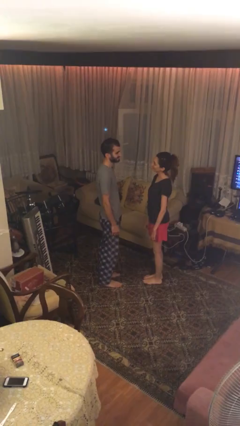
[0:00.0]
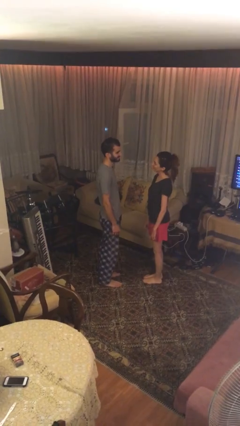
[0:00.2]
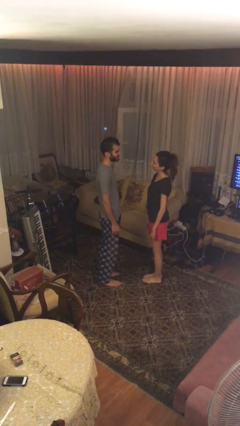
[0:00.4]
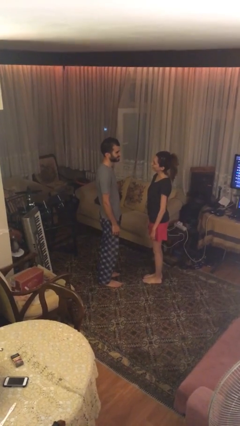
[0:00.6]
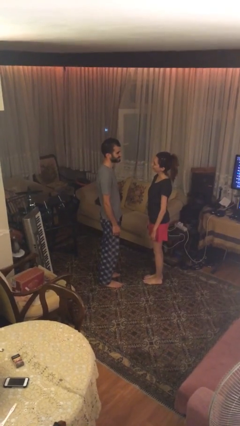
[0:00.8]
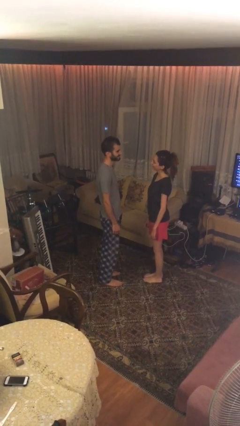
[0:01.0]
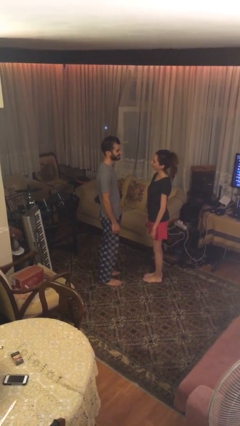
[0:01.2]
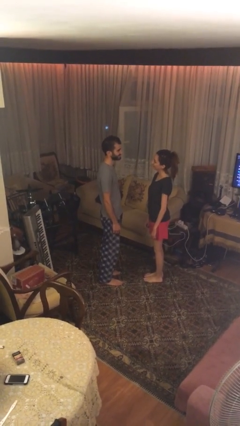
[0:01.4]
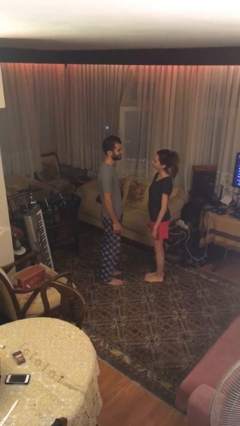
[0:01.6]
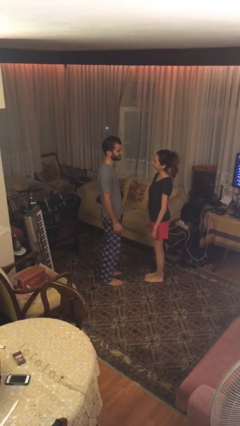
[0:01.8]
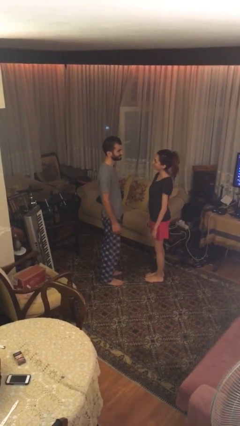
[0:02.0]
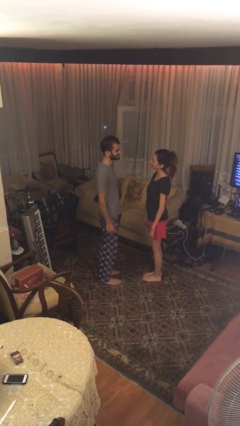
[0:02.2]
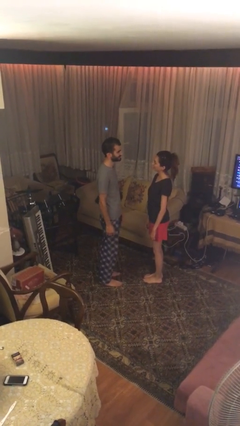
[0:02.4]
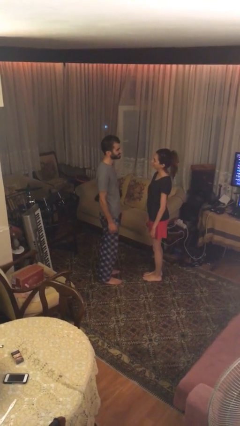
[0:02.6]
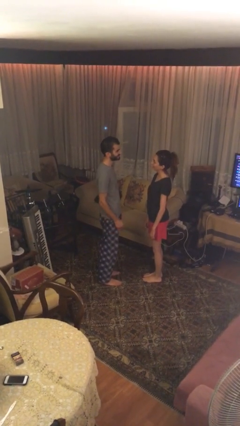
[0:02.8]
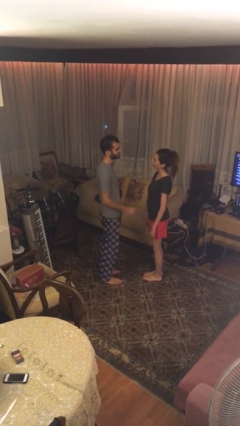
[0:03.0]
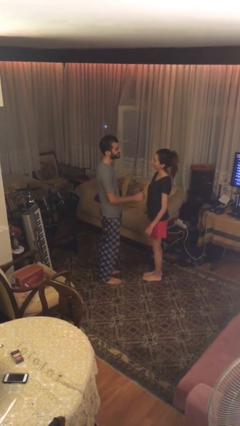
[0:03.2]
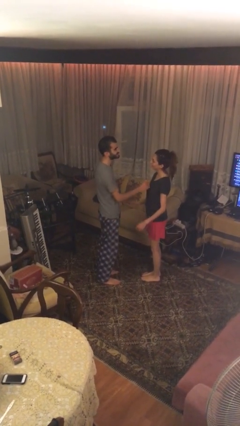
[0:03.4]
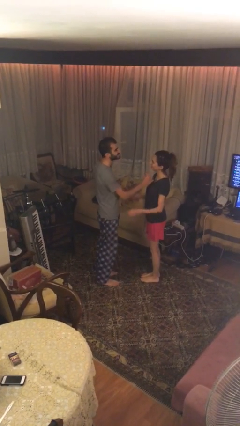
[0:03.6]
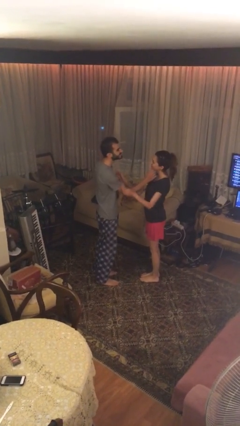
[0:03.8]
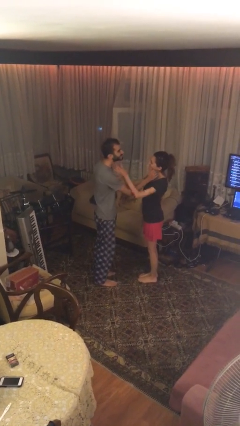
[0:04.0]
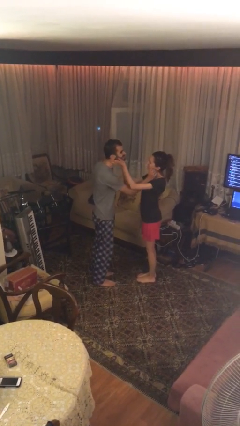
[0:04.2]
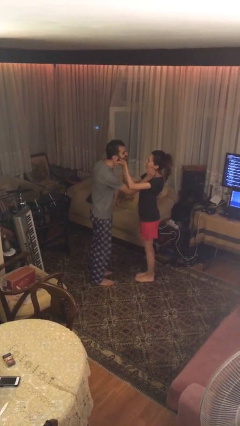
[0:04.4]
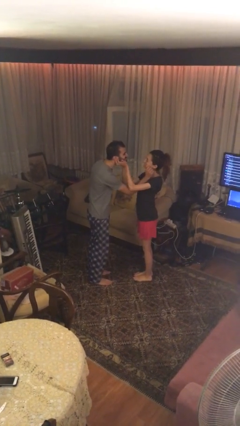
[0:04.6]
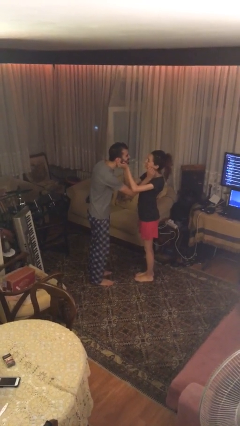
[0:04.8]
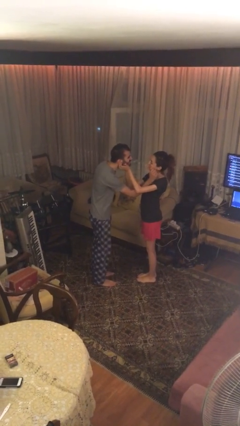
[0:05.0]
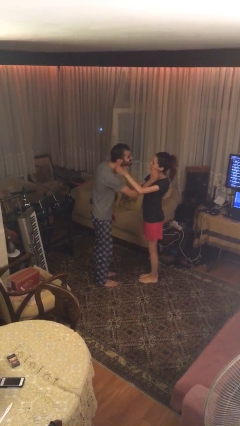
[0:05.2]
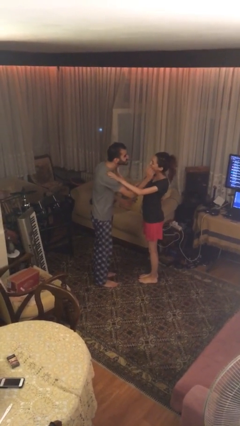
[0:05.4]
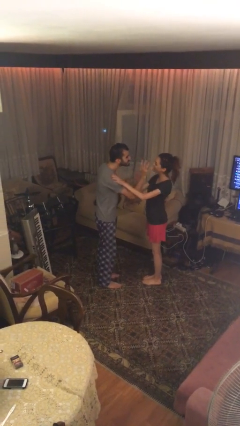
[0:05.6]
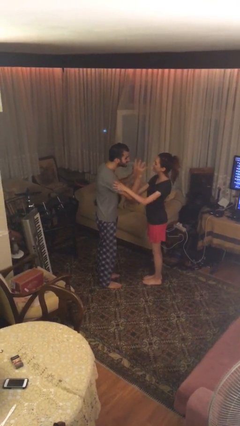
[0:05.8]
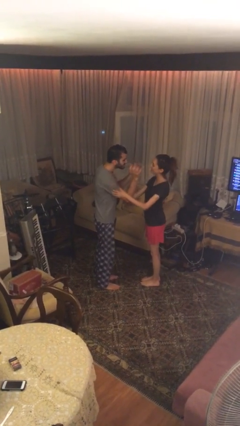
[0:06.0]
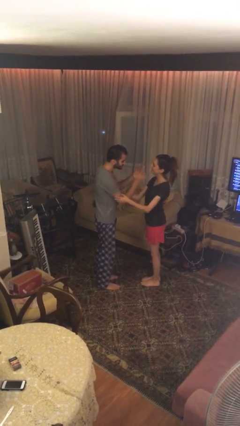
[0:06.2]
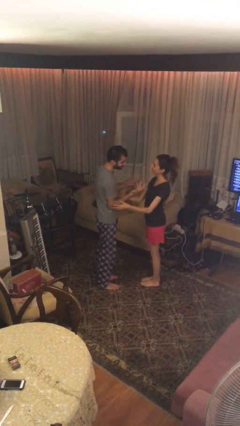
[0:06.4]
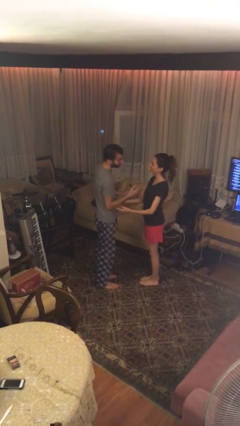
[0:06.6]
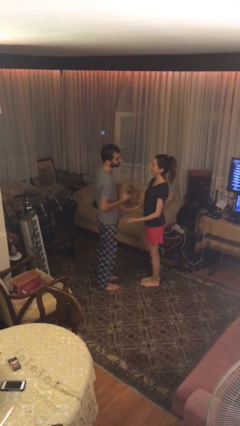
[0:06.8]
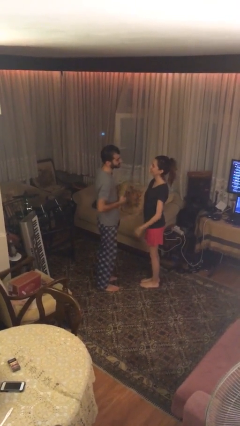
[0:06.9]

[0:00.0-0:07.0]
person talks to person

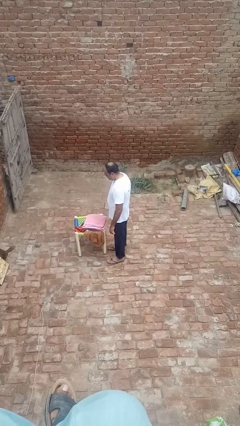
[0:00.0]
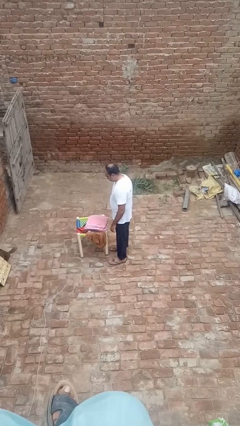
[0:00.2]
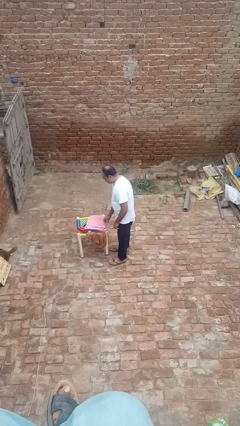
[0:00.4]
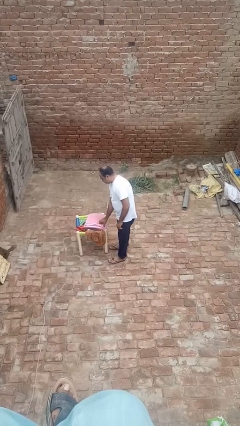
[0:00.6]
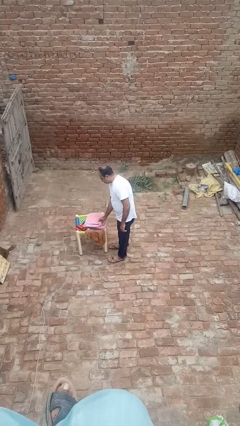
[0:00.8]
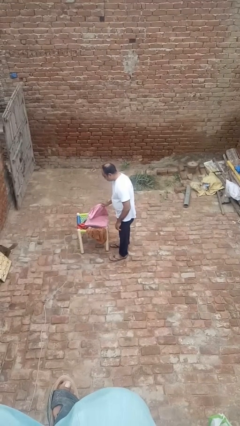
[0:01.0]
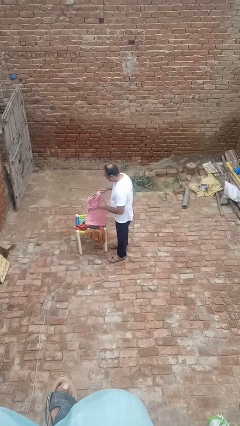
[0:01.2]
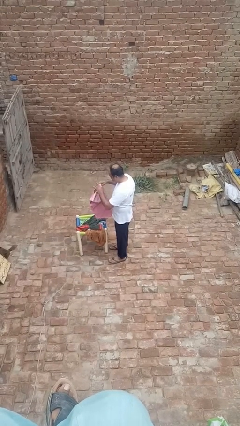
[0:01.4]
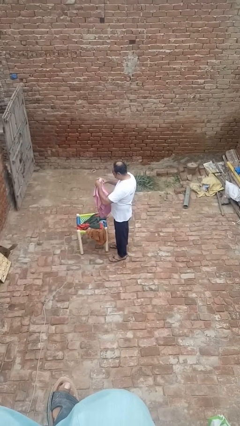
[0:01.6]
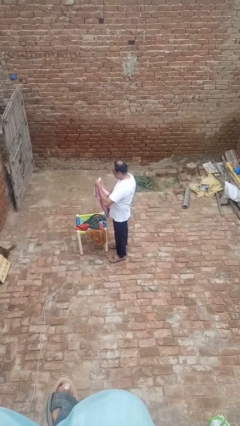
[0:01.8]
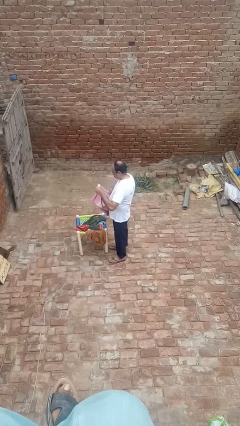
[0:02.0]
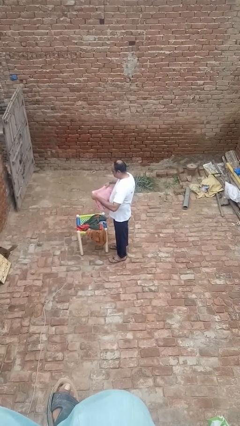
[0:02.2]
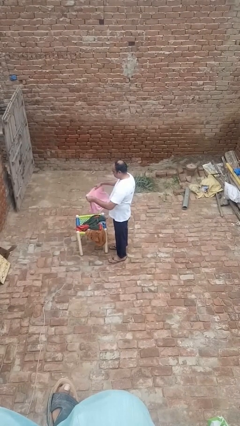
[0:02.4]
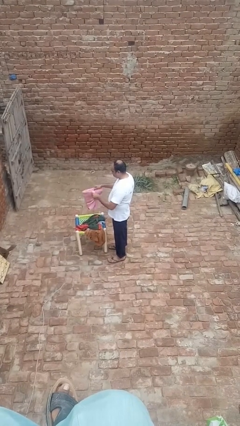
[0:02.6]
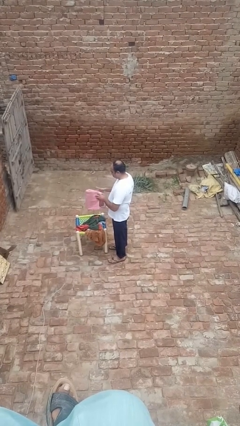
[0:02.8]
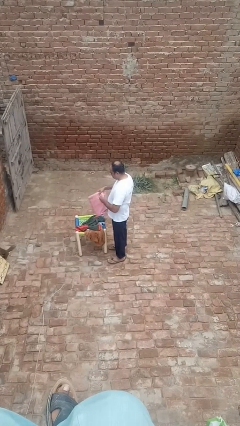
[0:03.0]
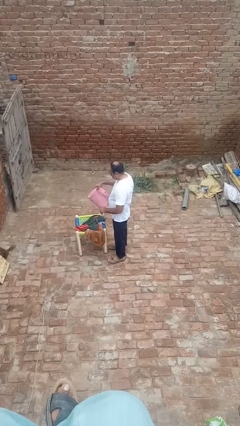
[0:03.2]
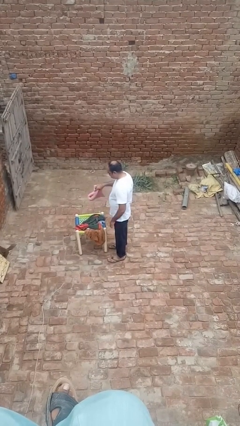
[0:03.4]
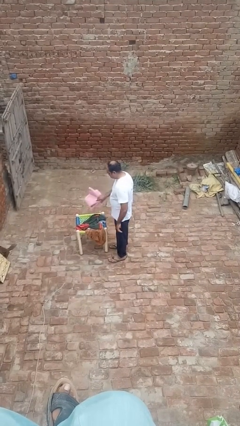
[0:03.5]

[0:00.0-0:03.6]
person folds towel

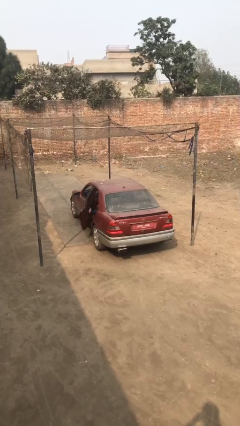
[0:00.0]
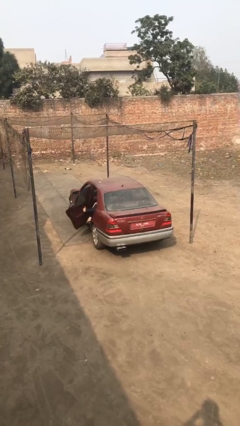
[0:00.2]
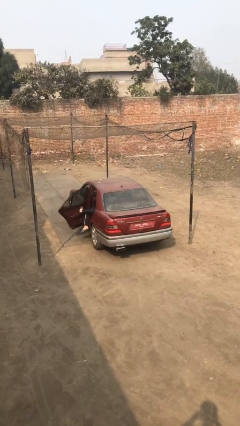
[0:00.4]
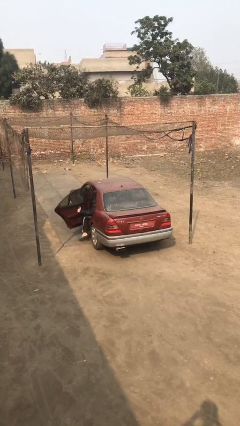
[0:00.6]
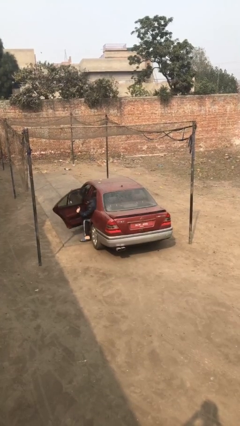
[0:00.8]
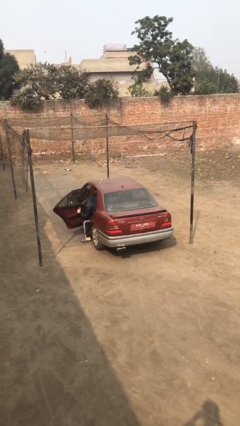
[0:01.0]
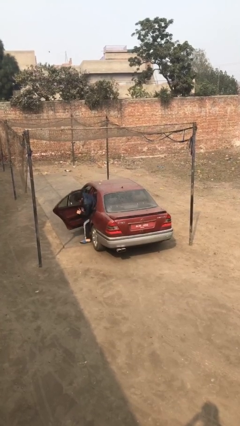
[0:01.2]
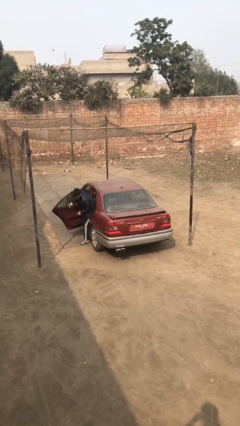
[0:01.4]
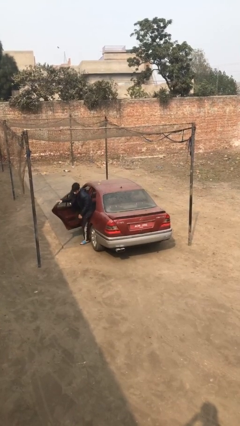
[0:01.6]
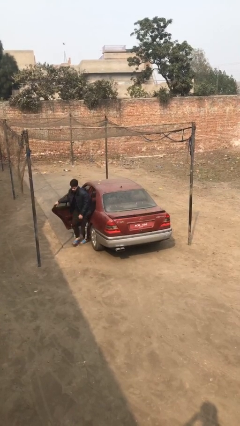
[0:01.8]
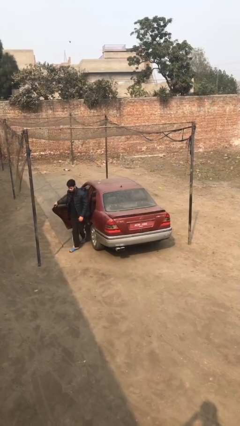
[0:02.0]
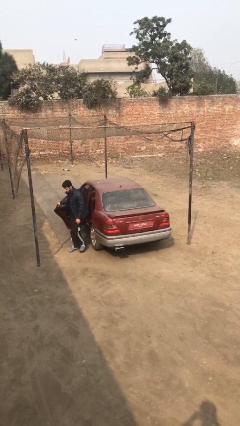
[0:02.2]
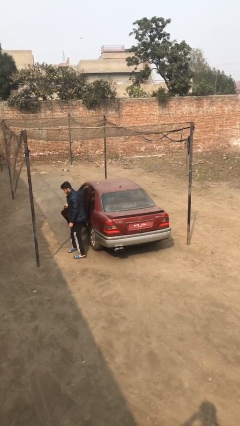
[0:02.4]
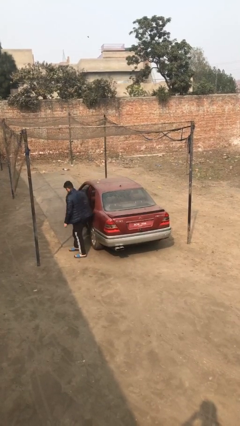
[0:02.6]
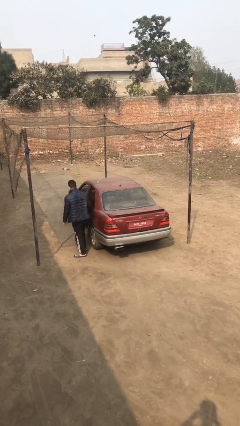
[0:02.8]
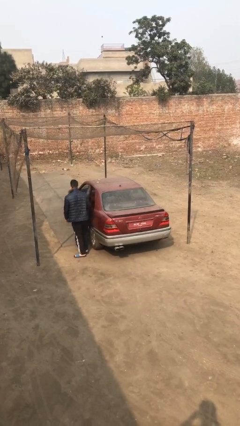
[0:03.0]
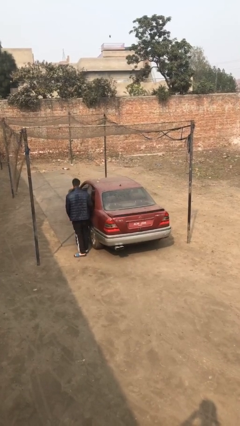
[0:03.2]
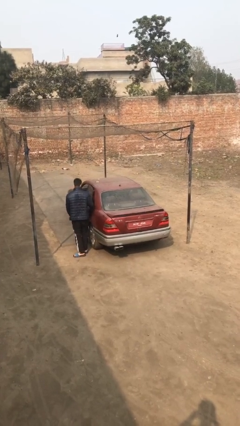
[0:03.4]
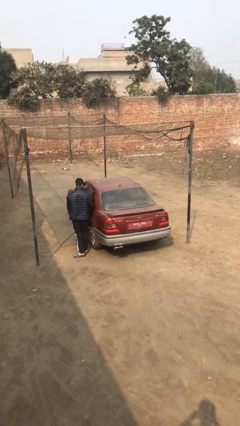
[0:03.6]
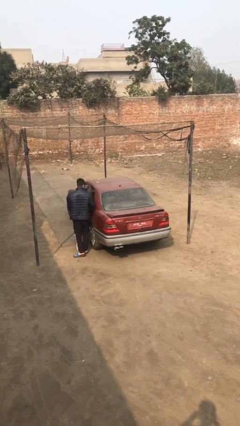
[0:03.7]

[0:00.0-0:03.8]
car drops off person

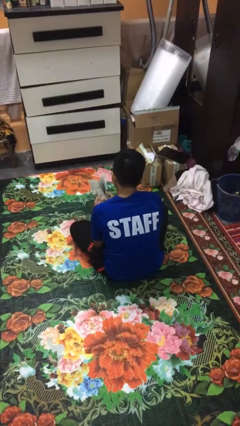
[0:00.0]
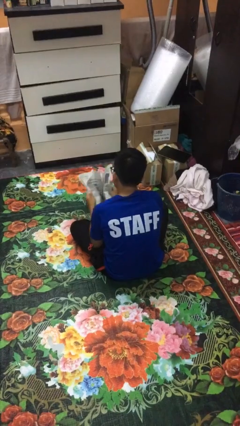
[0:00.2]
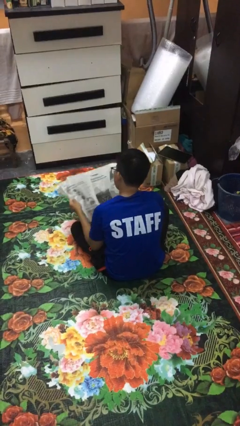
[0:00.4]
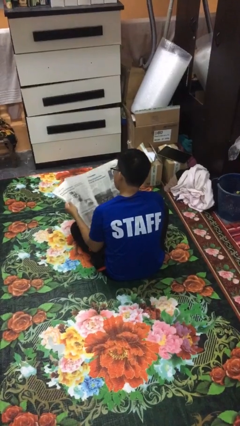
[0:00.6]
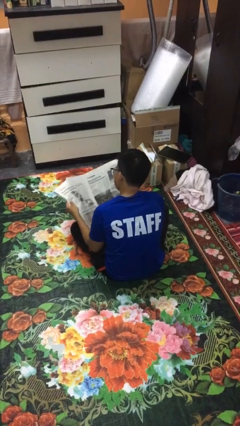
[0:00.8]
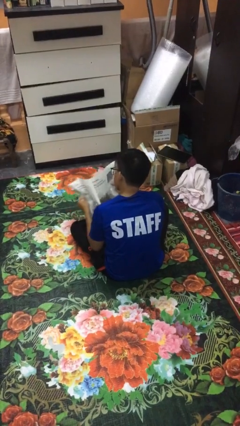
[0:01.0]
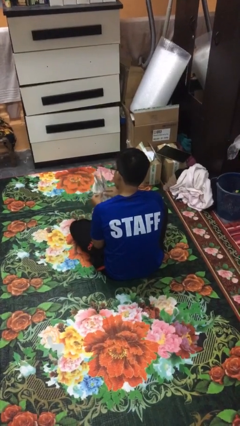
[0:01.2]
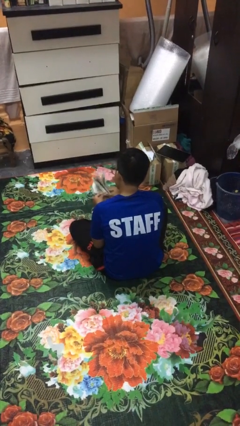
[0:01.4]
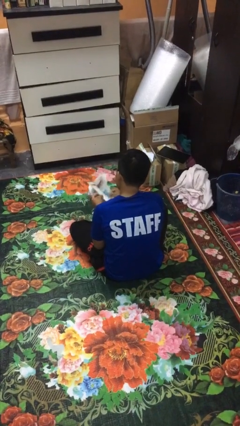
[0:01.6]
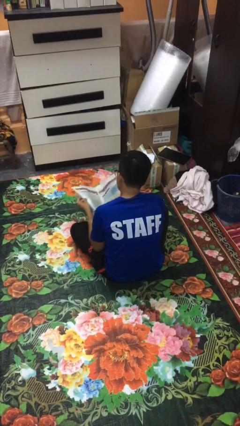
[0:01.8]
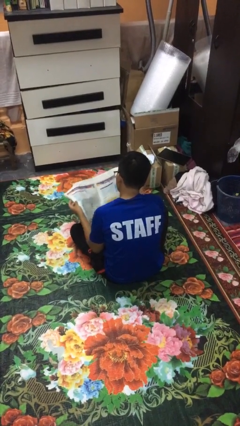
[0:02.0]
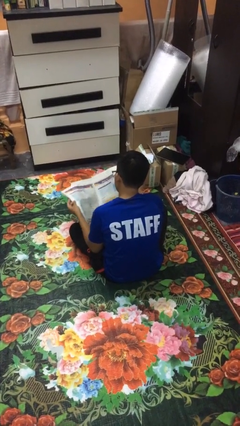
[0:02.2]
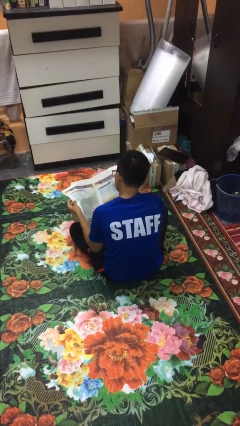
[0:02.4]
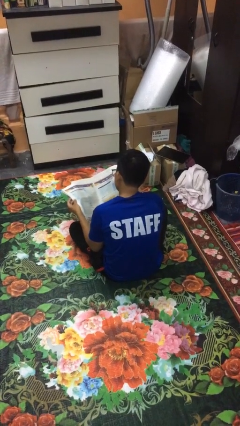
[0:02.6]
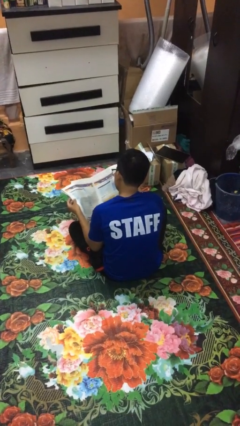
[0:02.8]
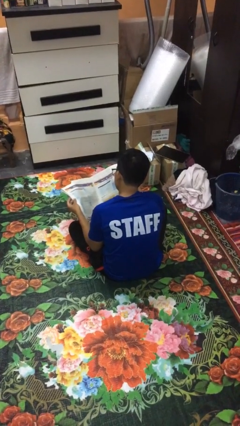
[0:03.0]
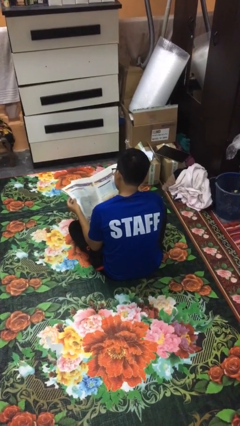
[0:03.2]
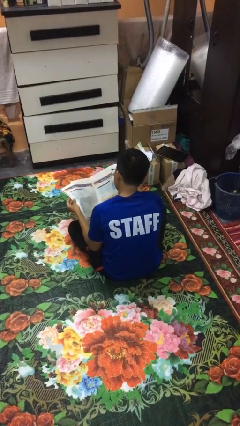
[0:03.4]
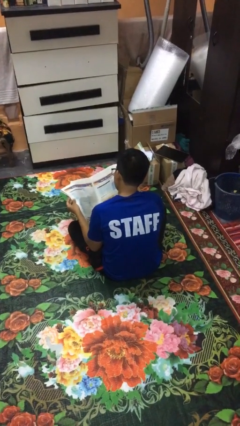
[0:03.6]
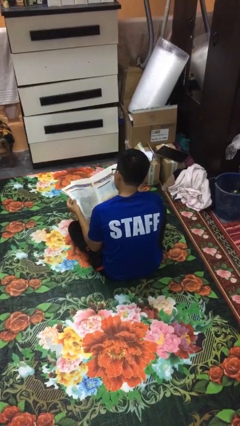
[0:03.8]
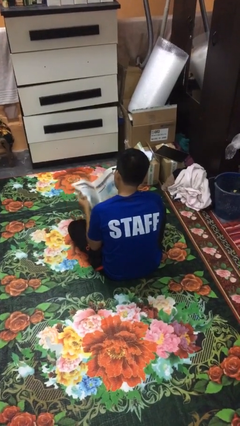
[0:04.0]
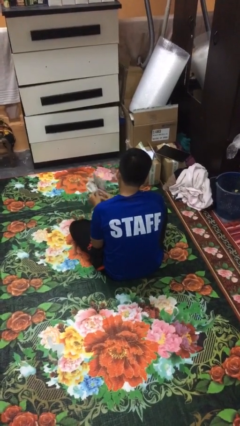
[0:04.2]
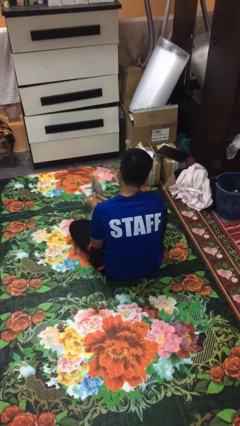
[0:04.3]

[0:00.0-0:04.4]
person reads newspaper
